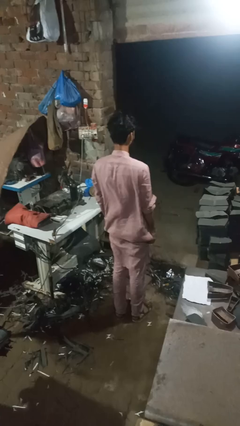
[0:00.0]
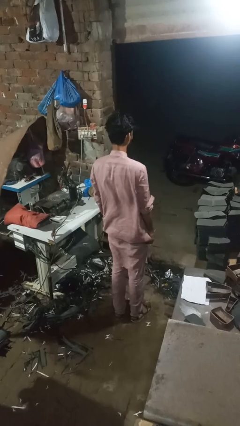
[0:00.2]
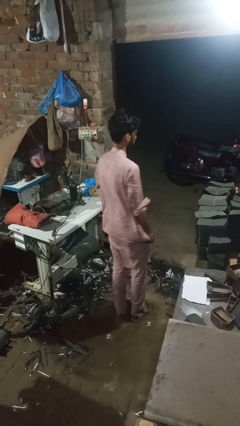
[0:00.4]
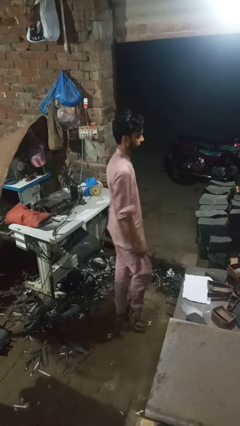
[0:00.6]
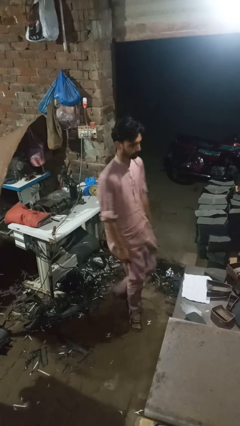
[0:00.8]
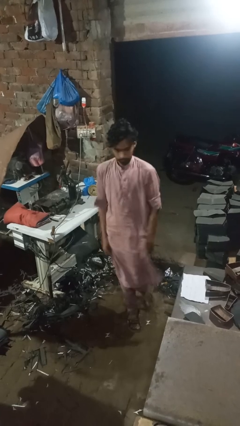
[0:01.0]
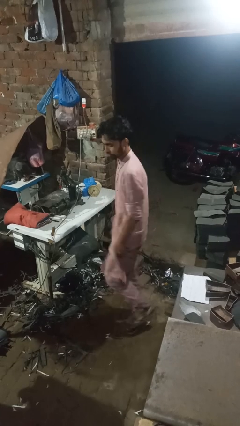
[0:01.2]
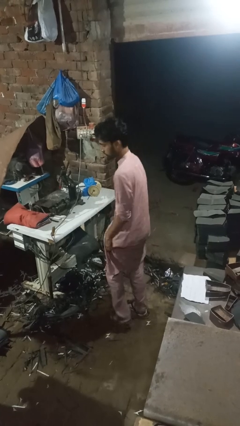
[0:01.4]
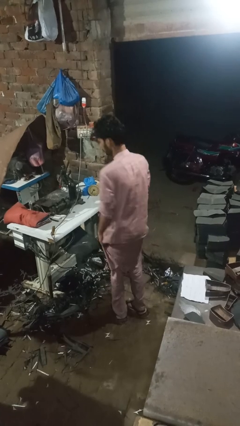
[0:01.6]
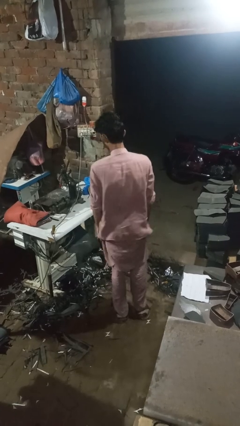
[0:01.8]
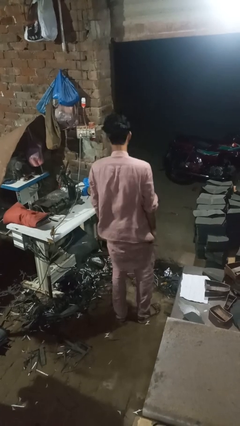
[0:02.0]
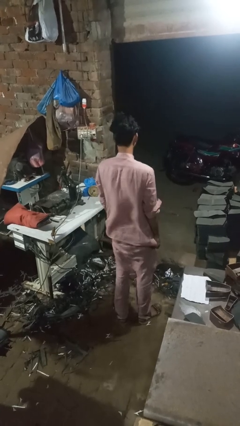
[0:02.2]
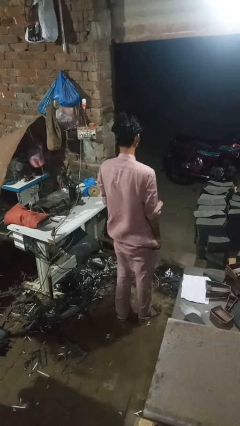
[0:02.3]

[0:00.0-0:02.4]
person twirls

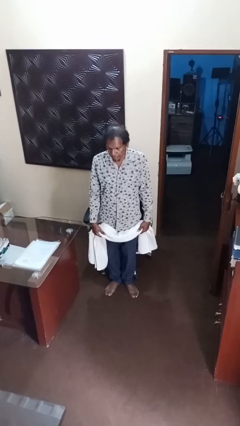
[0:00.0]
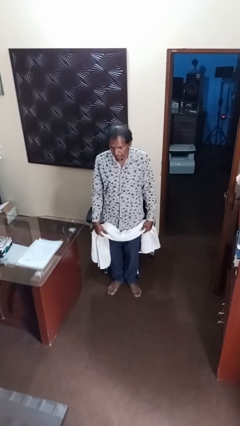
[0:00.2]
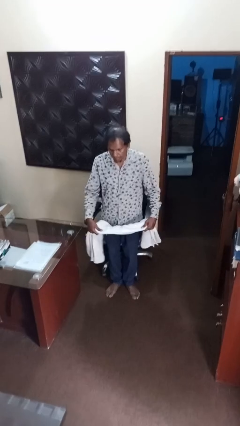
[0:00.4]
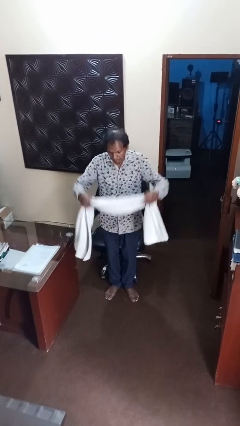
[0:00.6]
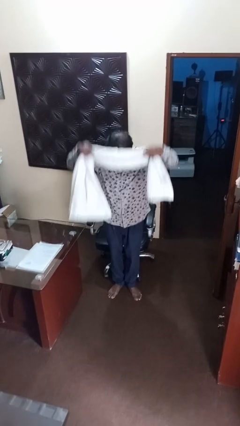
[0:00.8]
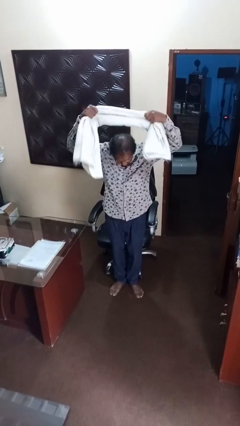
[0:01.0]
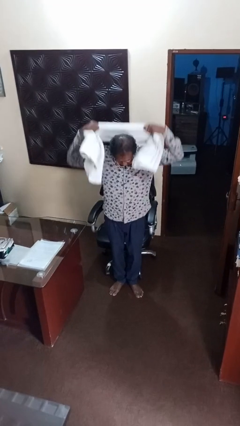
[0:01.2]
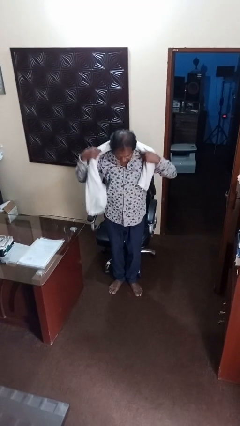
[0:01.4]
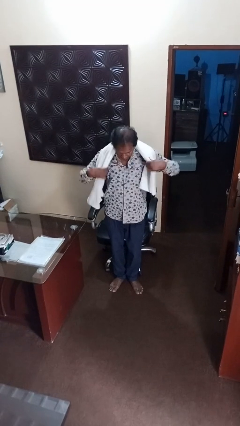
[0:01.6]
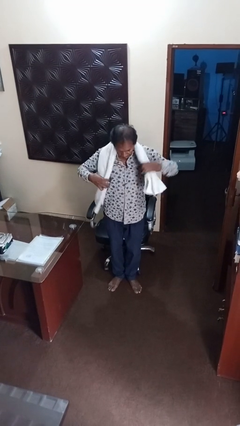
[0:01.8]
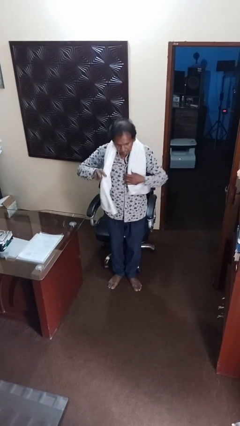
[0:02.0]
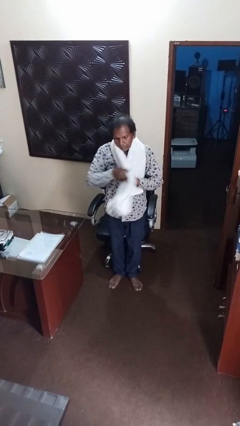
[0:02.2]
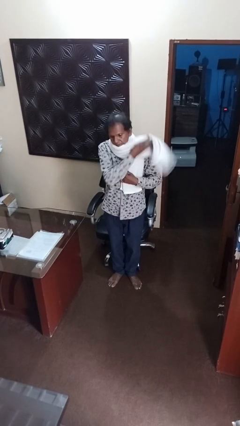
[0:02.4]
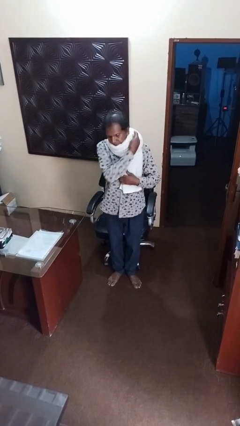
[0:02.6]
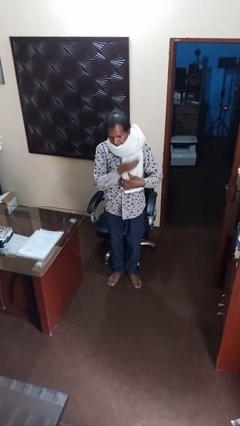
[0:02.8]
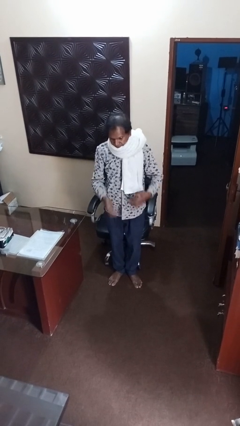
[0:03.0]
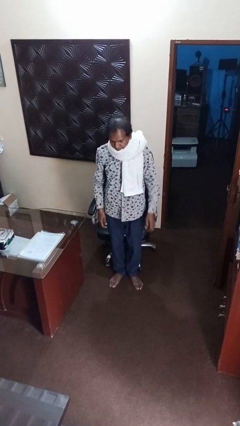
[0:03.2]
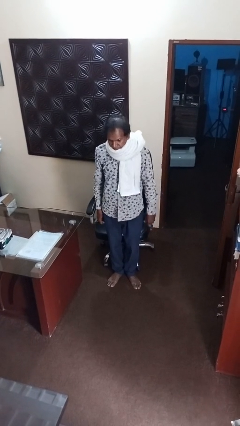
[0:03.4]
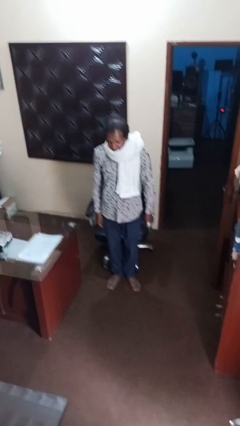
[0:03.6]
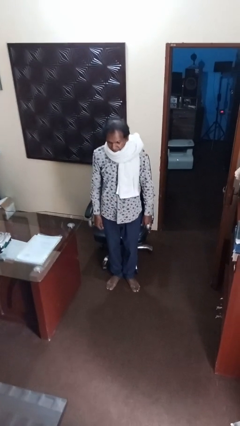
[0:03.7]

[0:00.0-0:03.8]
person puts on scarf

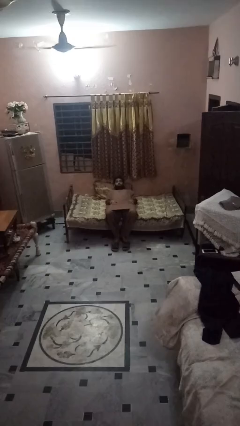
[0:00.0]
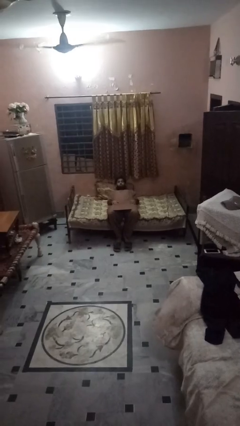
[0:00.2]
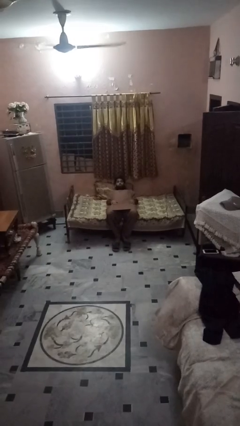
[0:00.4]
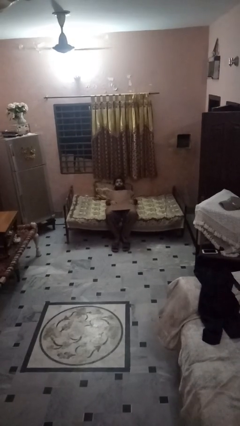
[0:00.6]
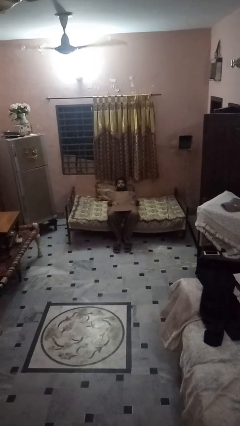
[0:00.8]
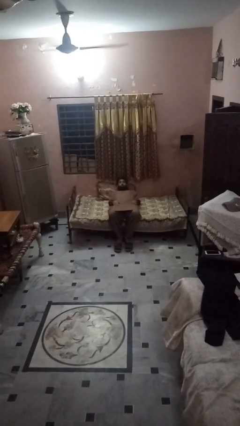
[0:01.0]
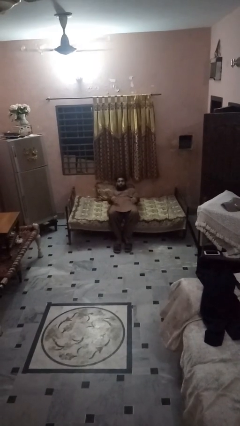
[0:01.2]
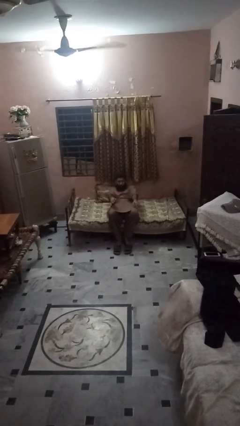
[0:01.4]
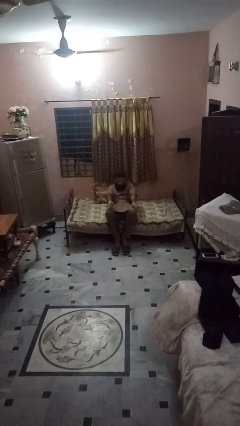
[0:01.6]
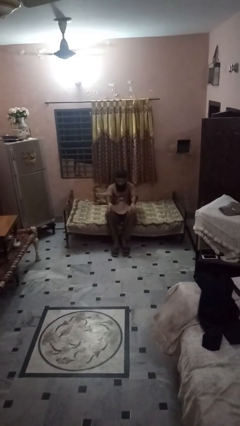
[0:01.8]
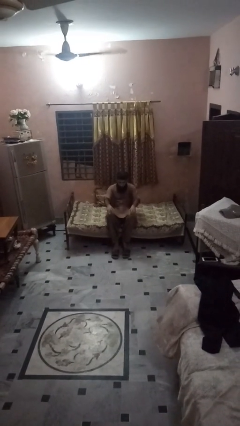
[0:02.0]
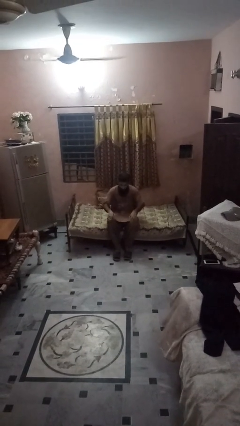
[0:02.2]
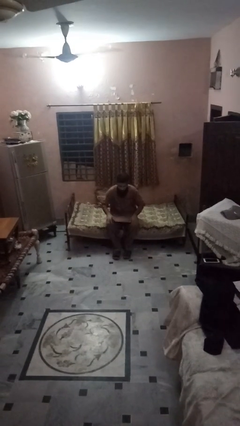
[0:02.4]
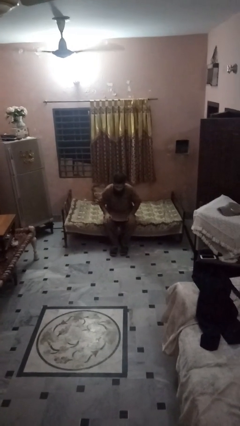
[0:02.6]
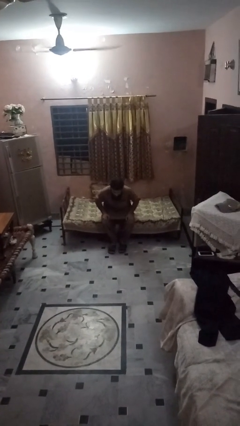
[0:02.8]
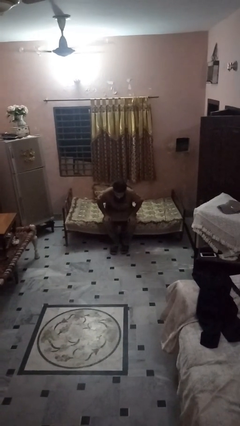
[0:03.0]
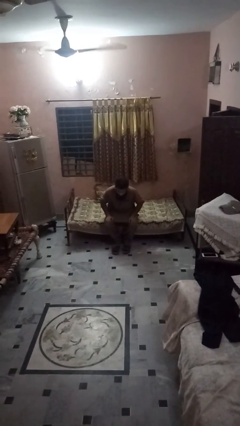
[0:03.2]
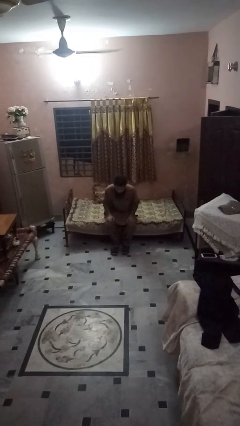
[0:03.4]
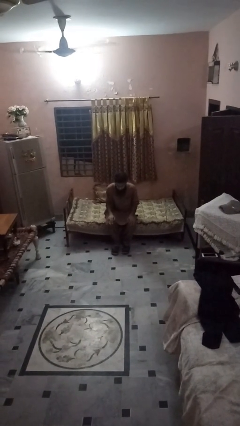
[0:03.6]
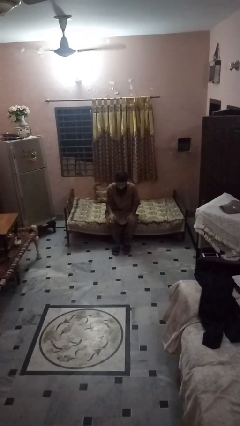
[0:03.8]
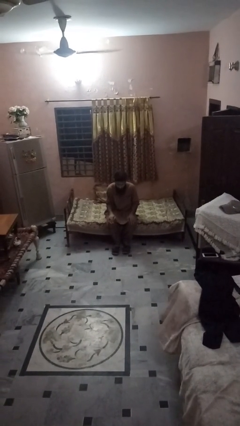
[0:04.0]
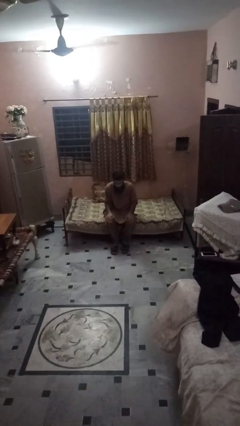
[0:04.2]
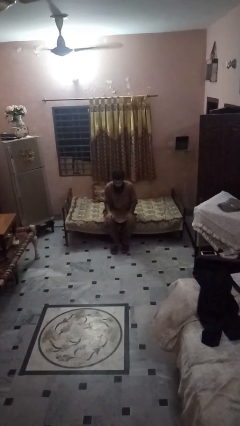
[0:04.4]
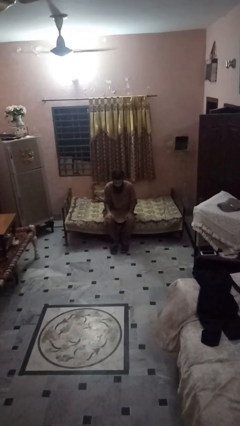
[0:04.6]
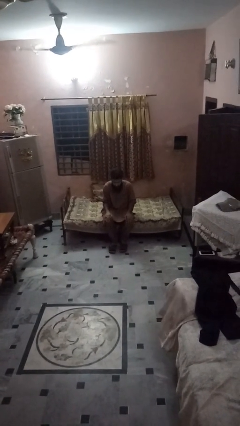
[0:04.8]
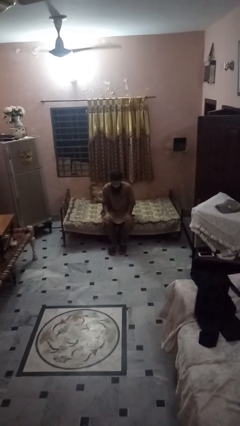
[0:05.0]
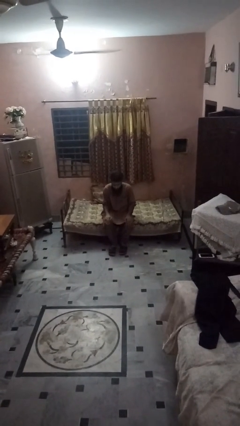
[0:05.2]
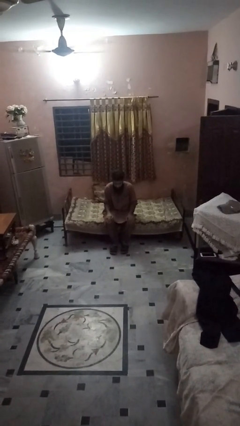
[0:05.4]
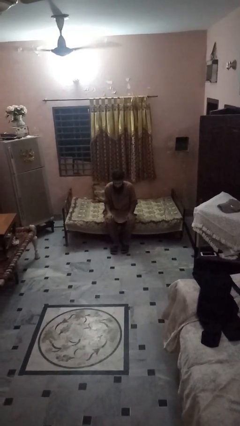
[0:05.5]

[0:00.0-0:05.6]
person stands up

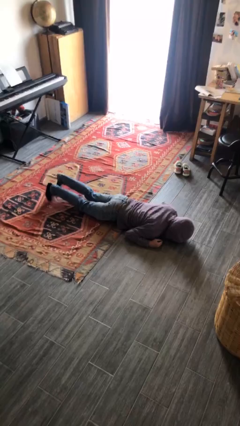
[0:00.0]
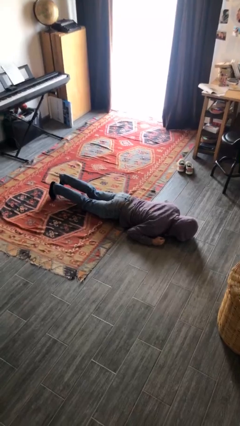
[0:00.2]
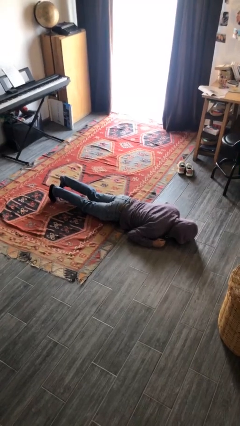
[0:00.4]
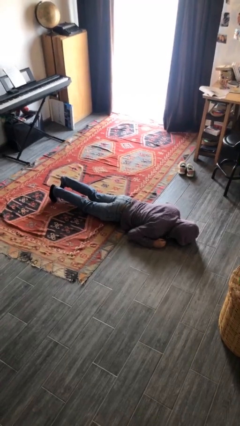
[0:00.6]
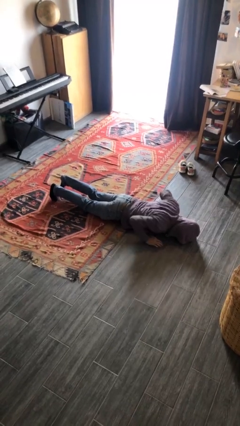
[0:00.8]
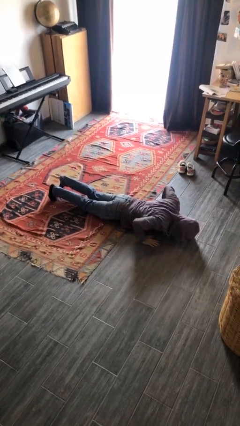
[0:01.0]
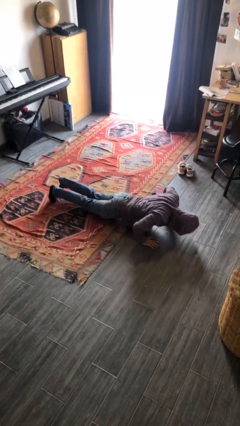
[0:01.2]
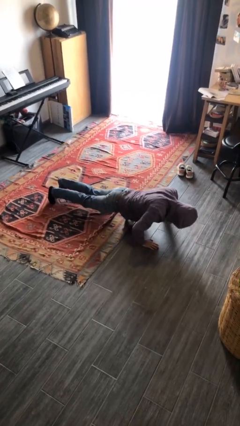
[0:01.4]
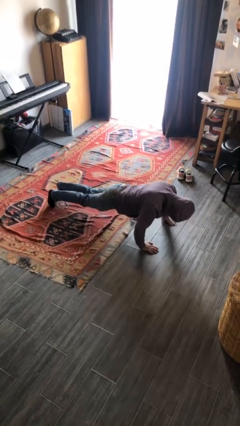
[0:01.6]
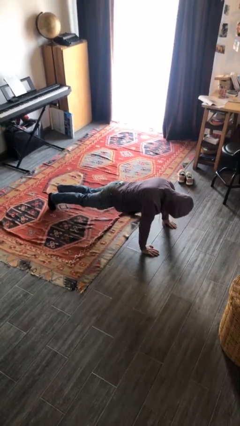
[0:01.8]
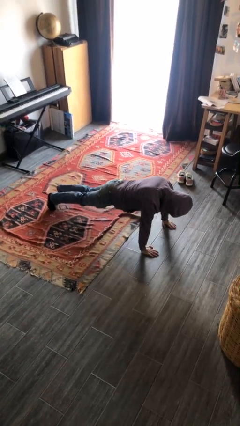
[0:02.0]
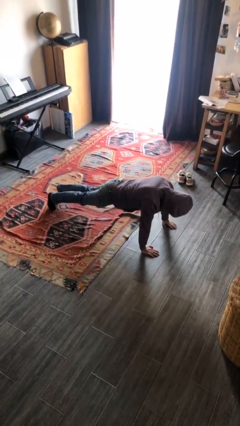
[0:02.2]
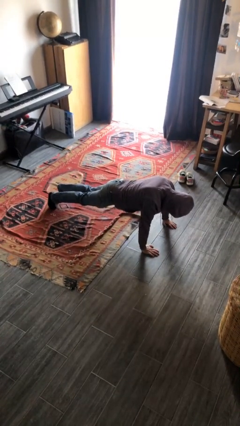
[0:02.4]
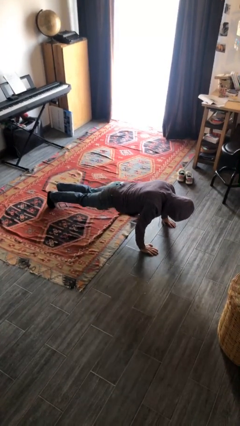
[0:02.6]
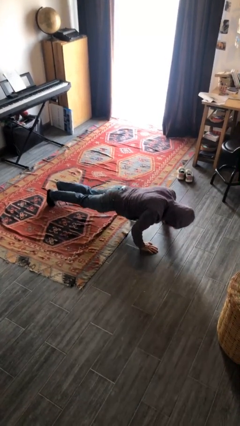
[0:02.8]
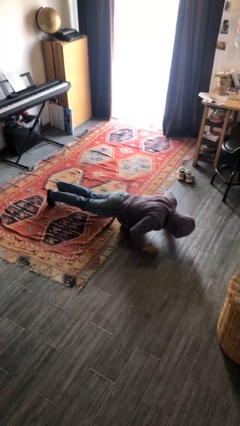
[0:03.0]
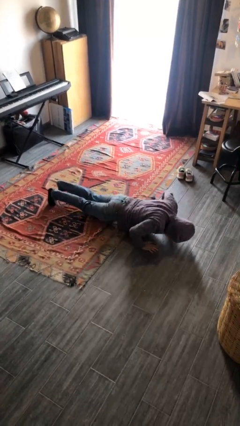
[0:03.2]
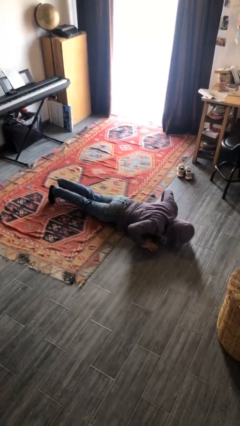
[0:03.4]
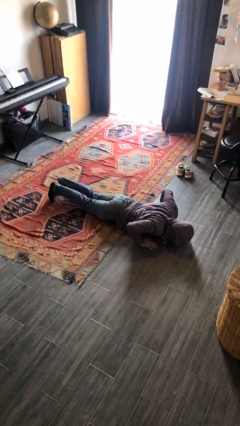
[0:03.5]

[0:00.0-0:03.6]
person exercises with pushup

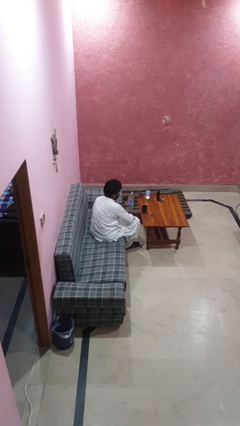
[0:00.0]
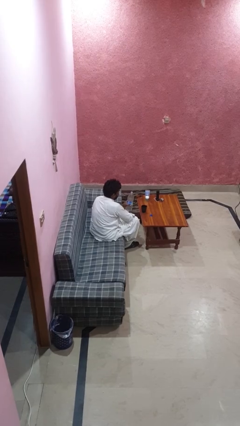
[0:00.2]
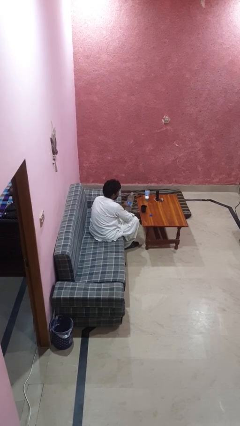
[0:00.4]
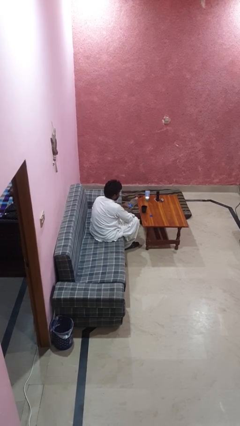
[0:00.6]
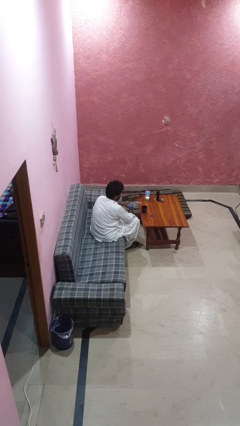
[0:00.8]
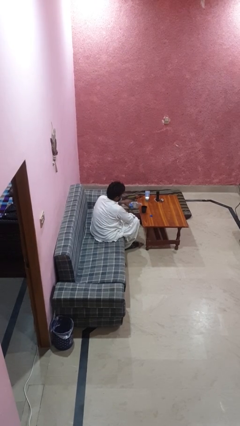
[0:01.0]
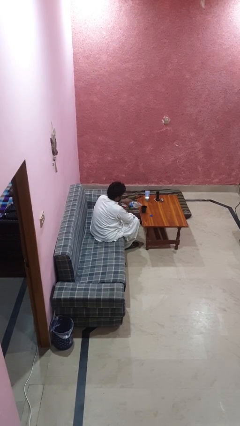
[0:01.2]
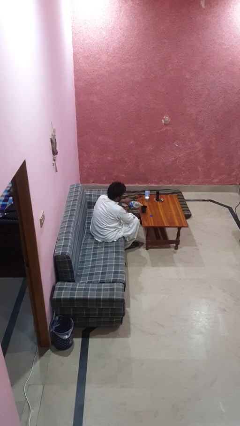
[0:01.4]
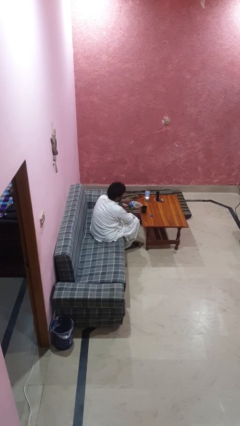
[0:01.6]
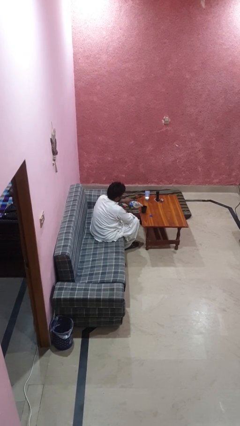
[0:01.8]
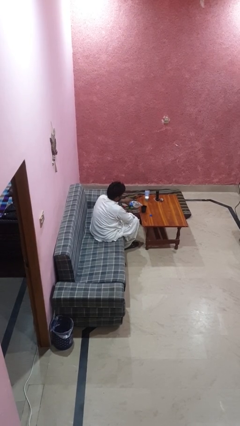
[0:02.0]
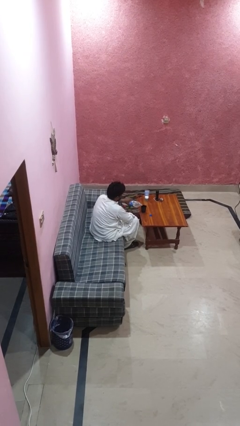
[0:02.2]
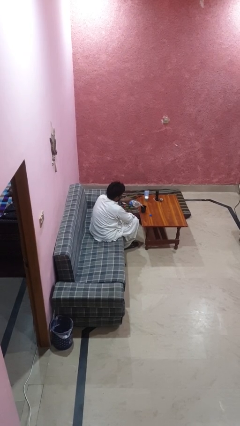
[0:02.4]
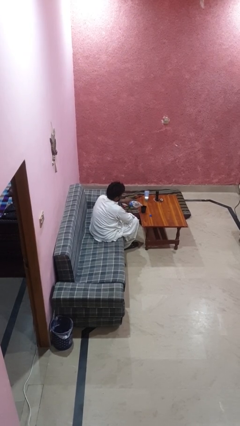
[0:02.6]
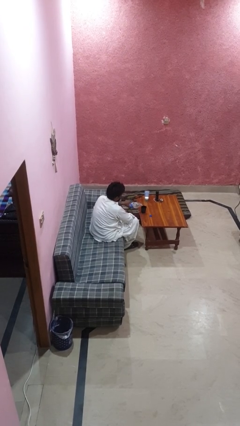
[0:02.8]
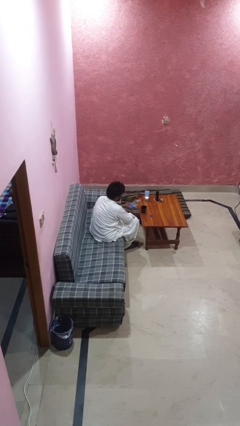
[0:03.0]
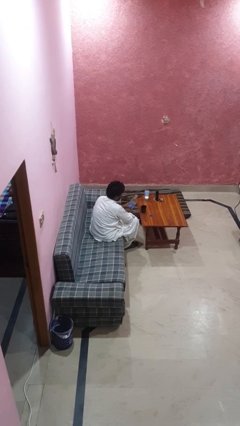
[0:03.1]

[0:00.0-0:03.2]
person pours liquid into cup
